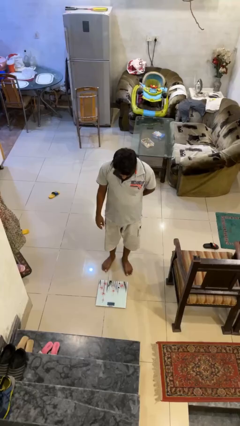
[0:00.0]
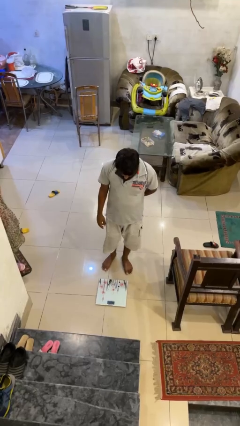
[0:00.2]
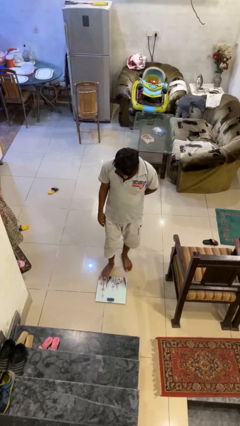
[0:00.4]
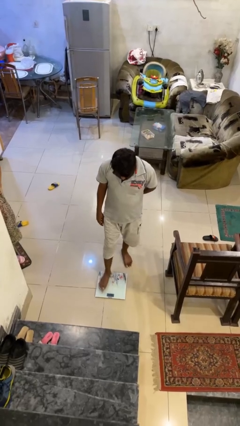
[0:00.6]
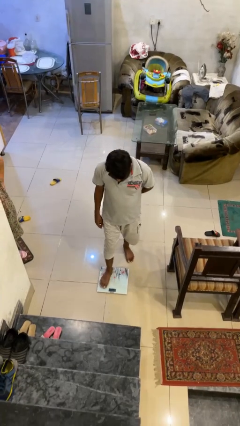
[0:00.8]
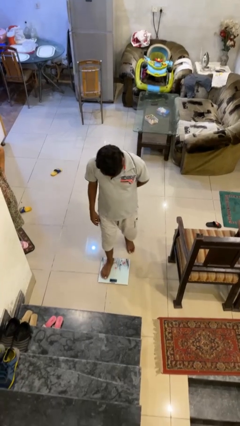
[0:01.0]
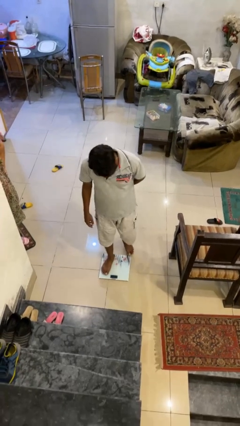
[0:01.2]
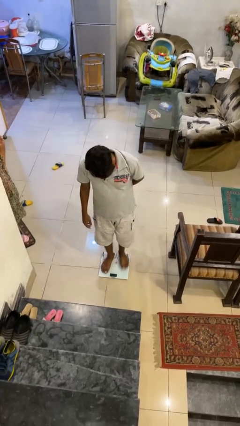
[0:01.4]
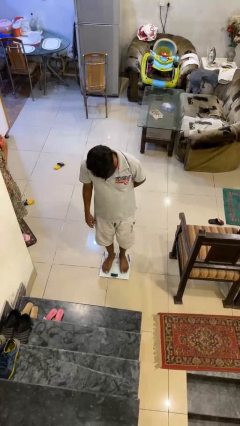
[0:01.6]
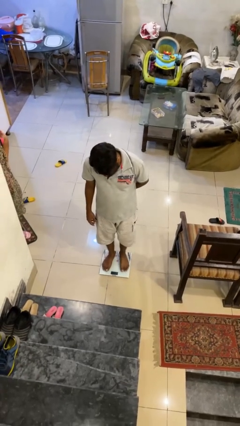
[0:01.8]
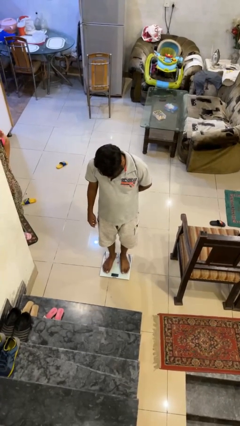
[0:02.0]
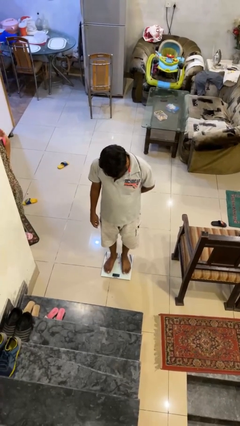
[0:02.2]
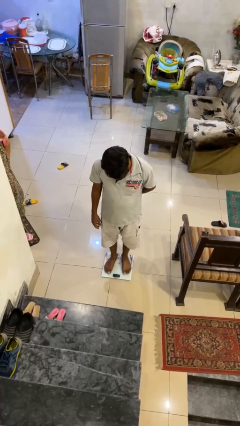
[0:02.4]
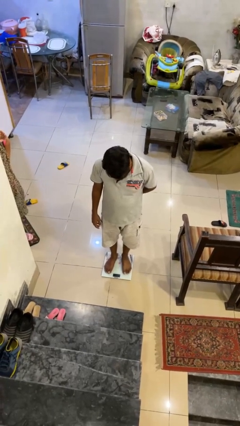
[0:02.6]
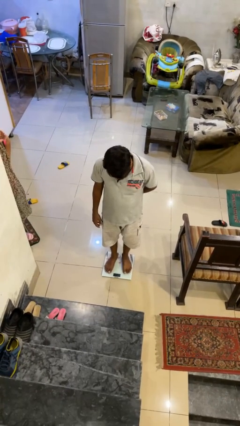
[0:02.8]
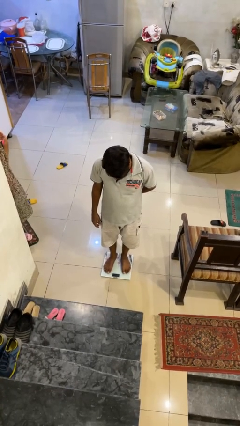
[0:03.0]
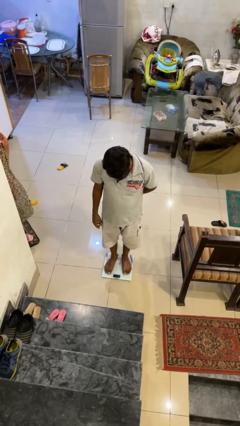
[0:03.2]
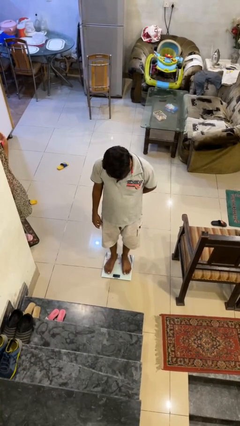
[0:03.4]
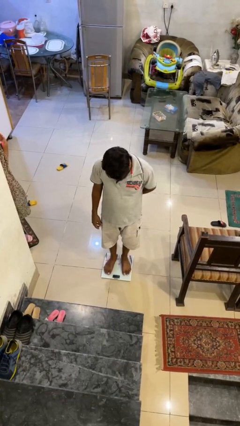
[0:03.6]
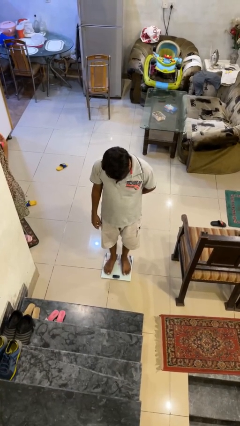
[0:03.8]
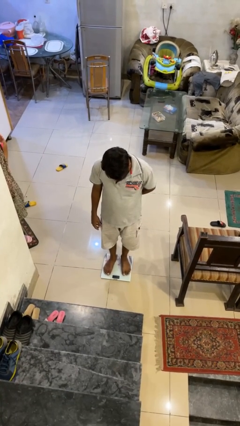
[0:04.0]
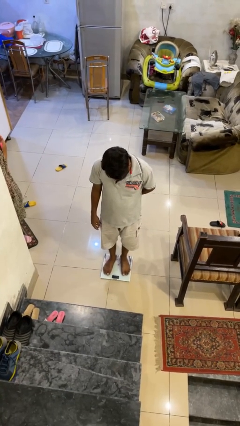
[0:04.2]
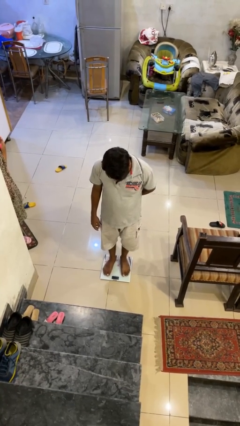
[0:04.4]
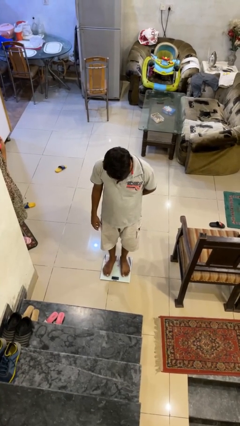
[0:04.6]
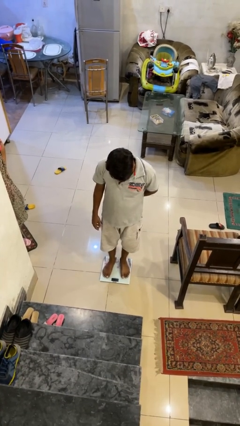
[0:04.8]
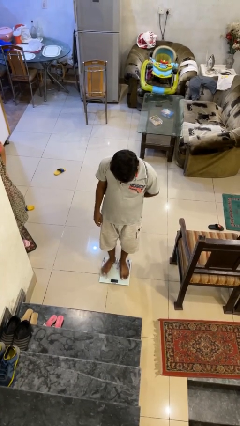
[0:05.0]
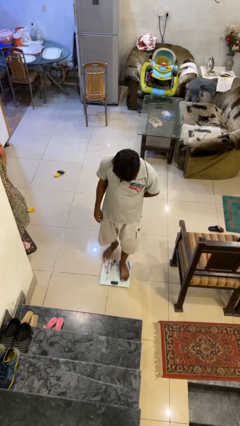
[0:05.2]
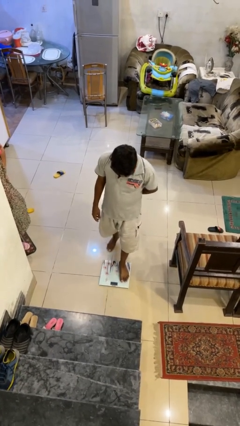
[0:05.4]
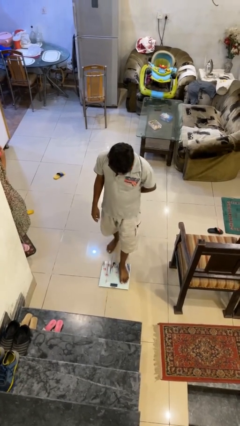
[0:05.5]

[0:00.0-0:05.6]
person uses bodyweight scale

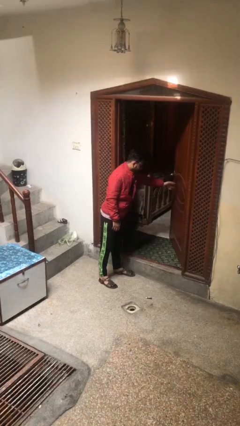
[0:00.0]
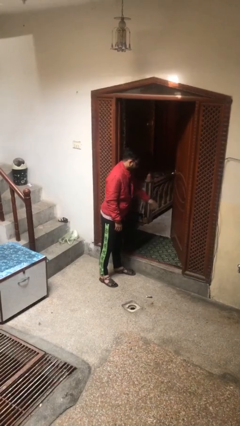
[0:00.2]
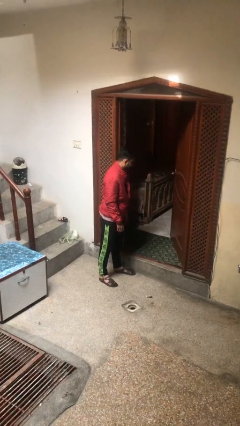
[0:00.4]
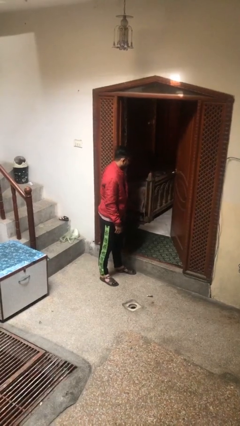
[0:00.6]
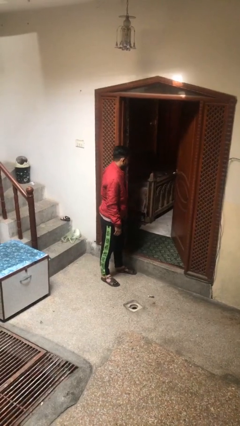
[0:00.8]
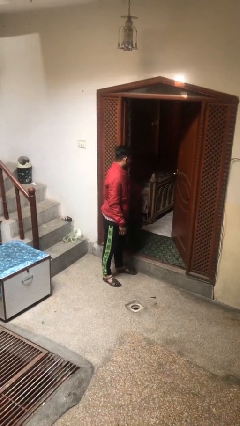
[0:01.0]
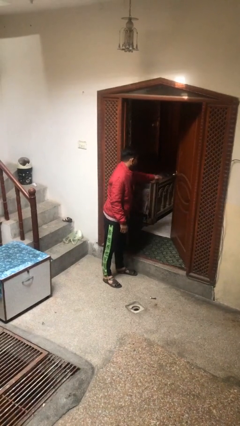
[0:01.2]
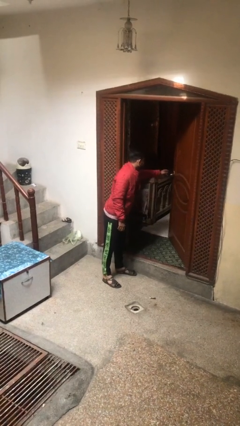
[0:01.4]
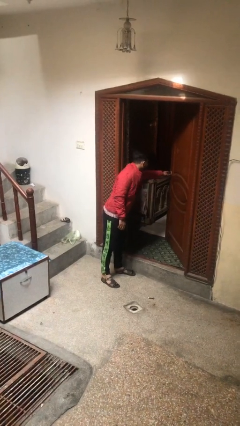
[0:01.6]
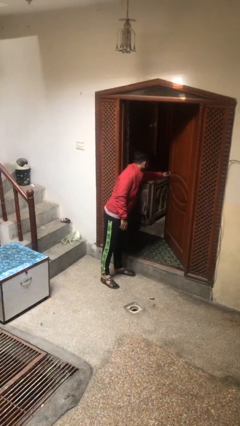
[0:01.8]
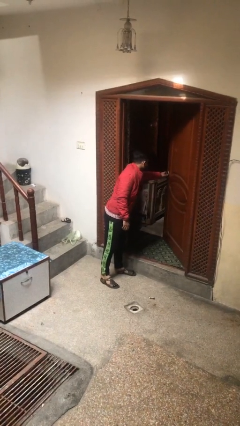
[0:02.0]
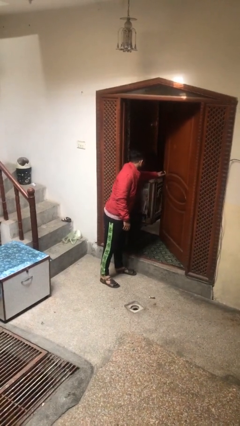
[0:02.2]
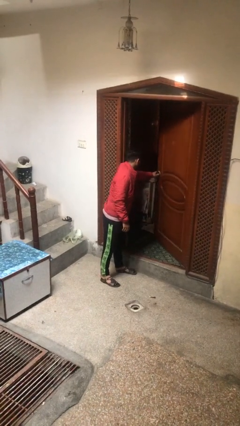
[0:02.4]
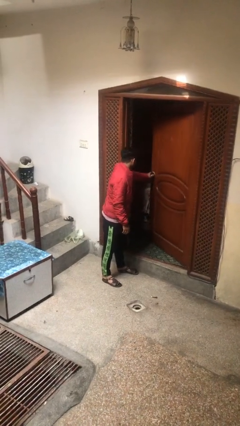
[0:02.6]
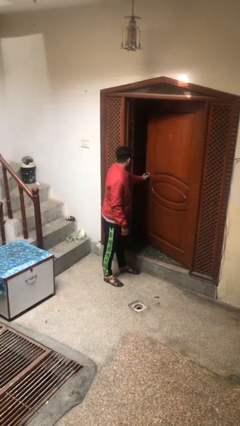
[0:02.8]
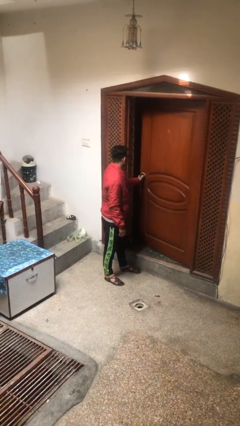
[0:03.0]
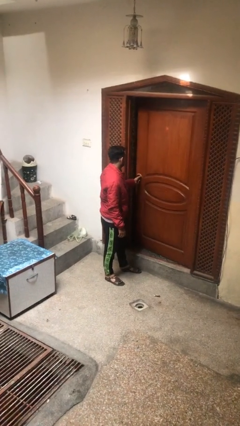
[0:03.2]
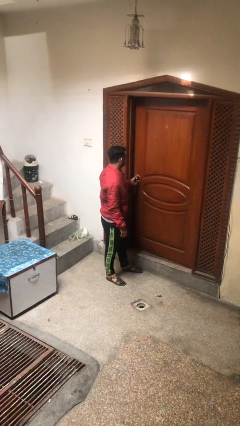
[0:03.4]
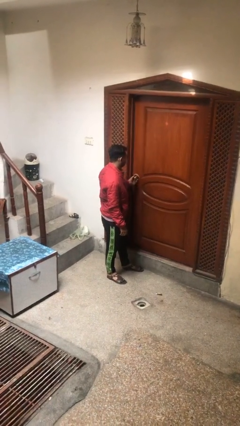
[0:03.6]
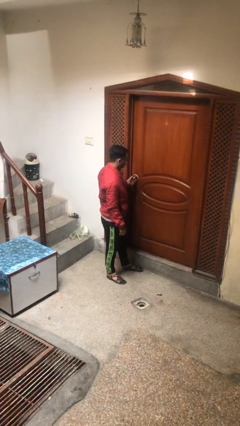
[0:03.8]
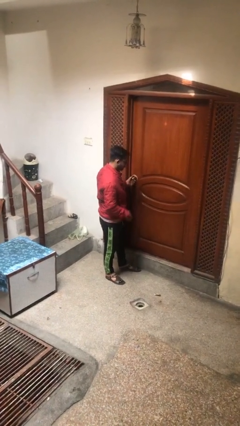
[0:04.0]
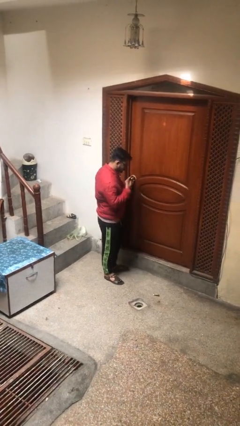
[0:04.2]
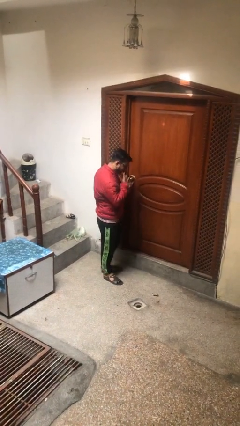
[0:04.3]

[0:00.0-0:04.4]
person closes facility door

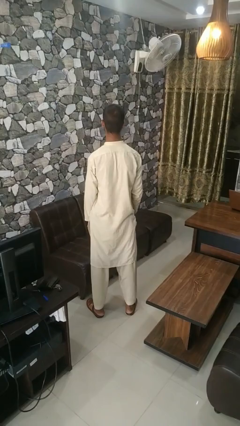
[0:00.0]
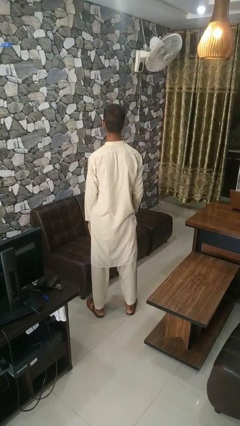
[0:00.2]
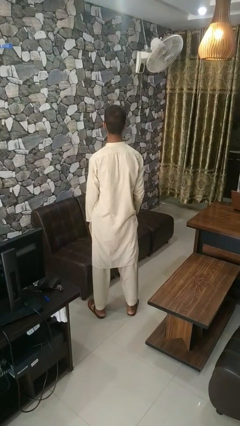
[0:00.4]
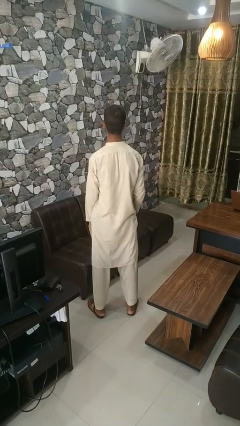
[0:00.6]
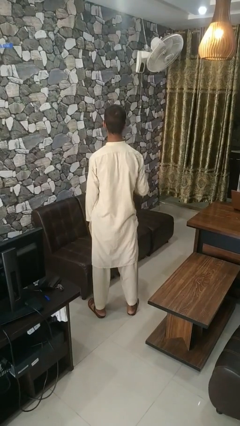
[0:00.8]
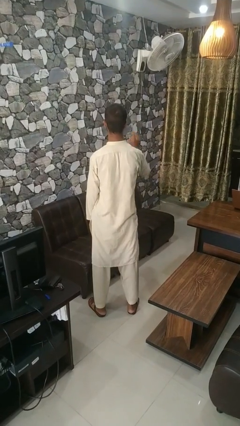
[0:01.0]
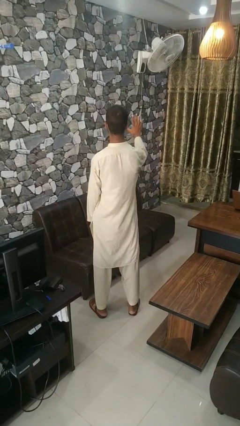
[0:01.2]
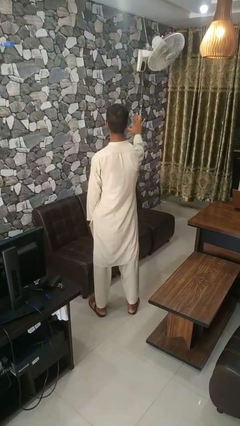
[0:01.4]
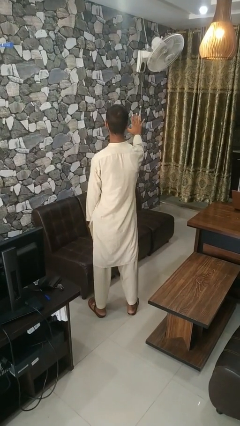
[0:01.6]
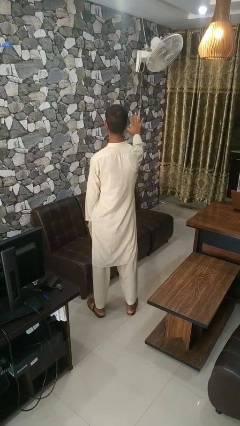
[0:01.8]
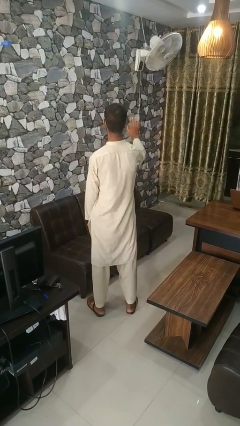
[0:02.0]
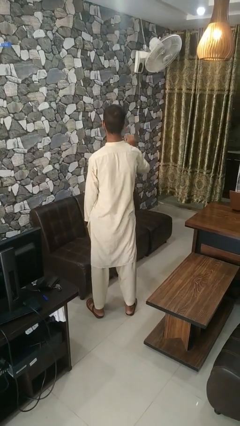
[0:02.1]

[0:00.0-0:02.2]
person gestures number five

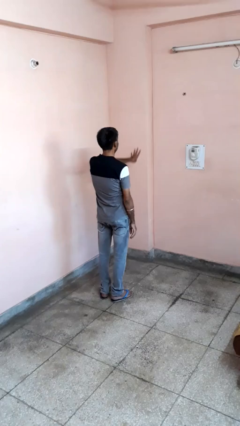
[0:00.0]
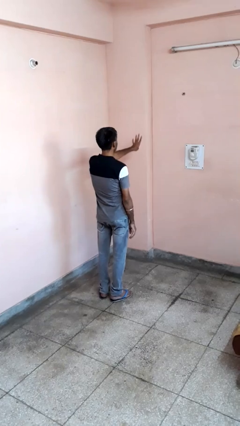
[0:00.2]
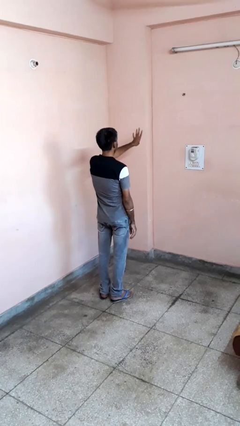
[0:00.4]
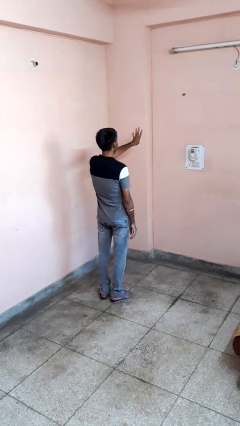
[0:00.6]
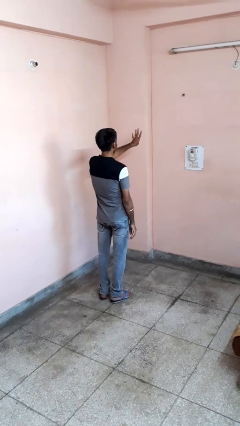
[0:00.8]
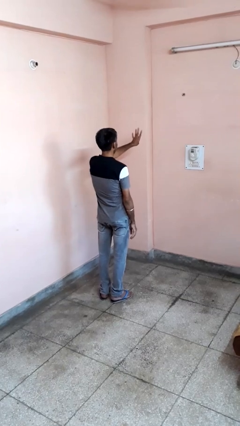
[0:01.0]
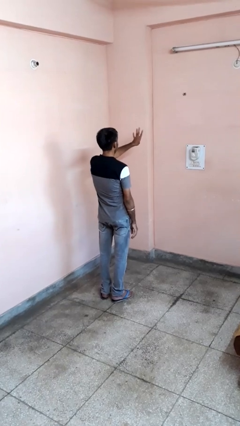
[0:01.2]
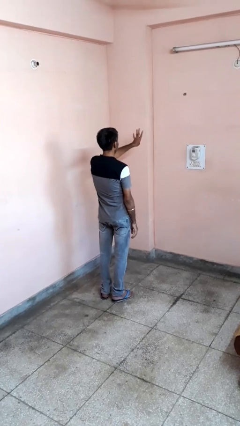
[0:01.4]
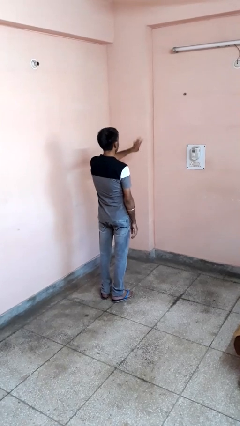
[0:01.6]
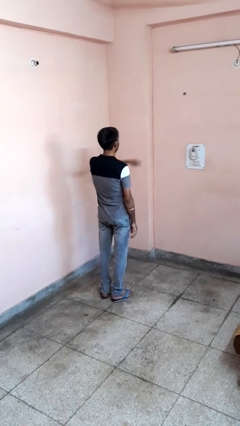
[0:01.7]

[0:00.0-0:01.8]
person gestures number four

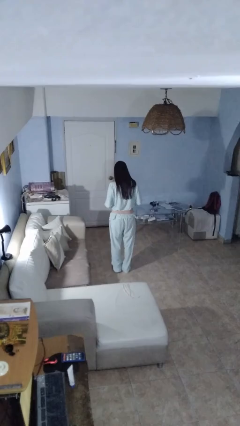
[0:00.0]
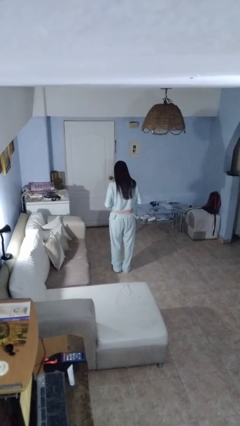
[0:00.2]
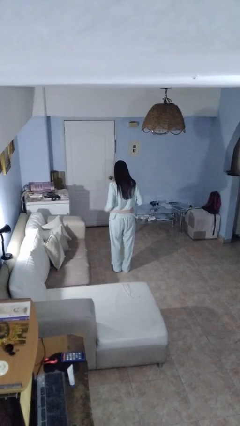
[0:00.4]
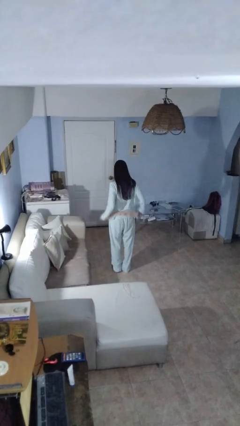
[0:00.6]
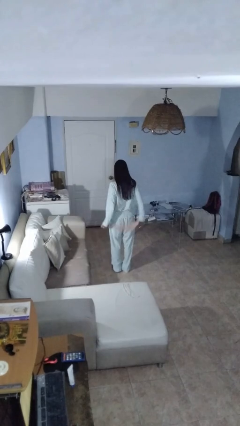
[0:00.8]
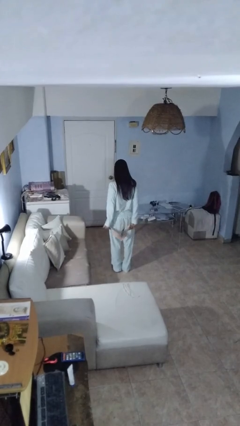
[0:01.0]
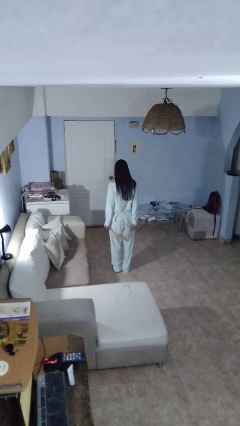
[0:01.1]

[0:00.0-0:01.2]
person takes off belt

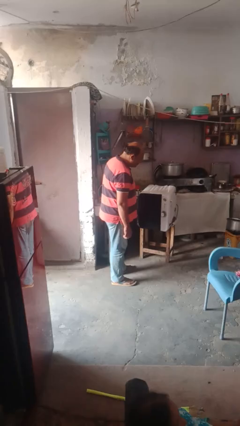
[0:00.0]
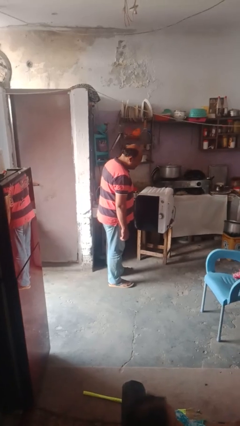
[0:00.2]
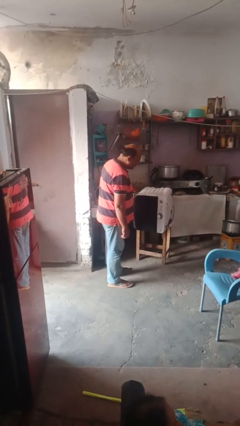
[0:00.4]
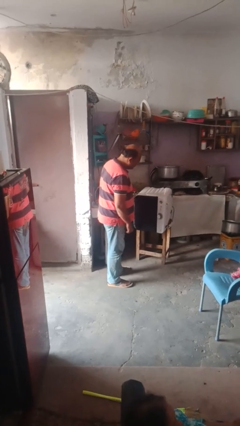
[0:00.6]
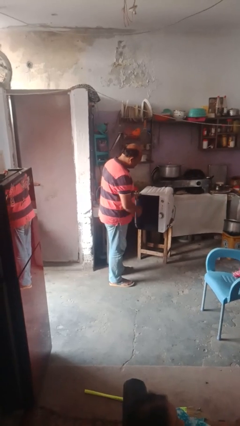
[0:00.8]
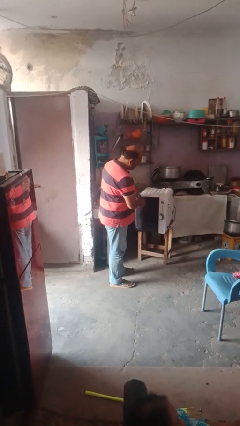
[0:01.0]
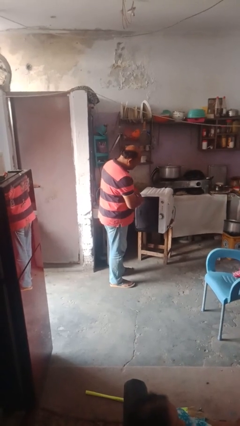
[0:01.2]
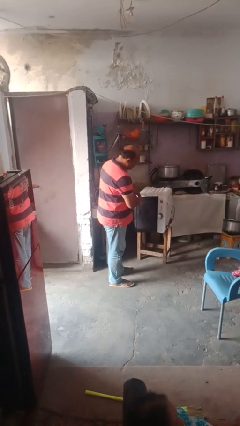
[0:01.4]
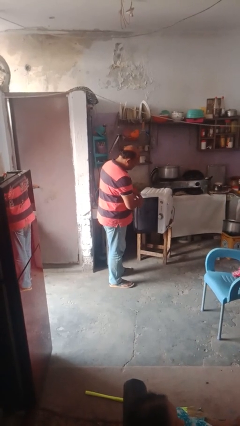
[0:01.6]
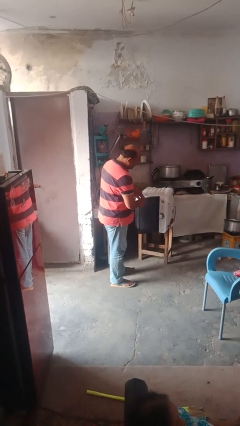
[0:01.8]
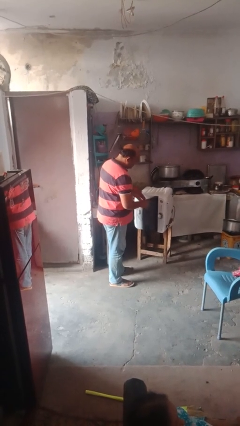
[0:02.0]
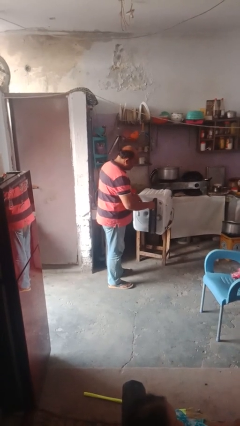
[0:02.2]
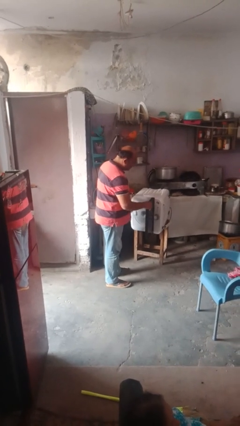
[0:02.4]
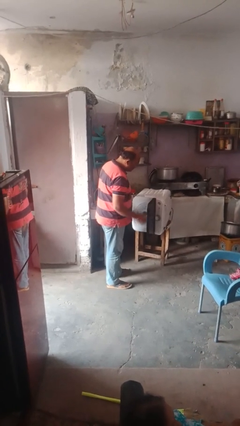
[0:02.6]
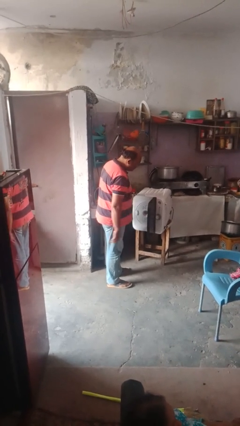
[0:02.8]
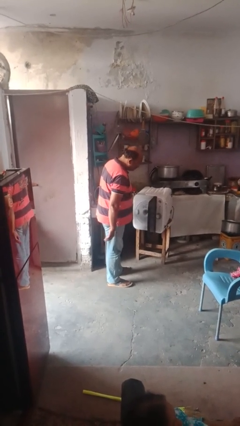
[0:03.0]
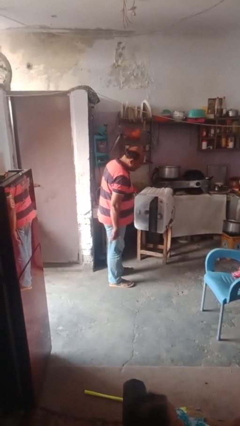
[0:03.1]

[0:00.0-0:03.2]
person opens dishwasher
